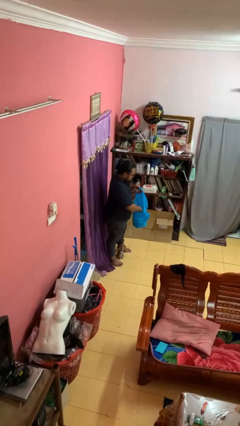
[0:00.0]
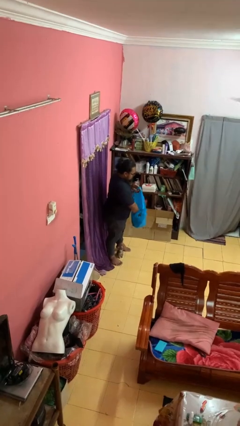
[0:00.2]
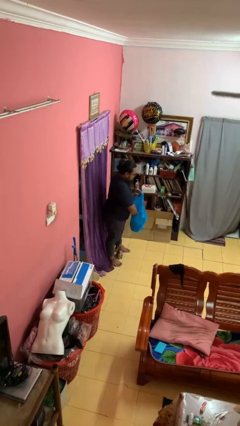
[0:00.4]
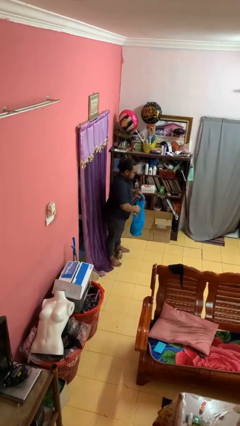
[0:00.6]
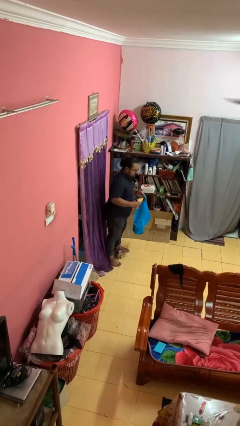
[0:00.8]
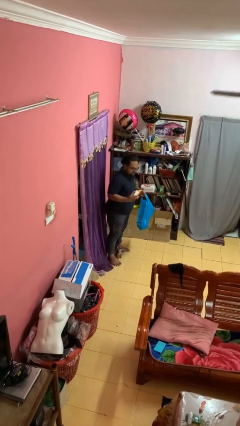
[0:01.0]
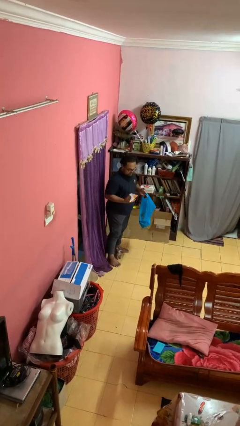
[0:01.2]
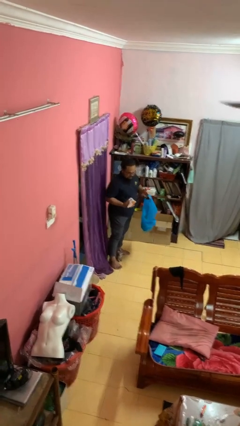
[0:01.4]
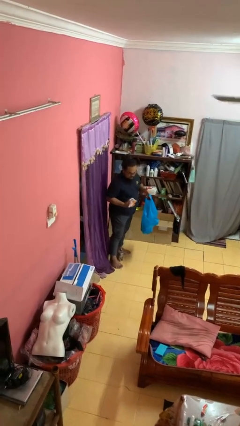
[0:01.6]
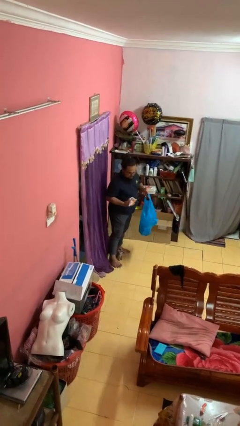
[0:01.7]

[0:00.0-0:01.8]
person takes object from bag

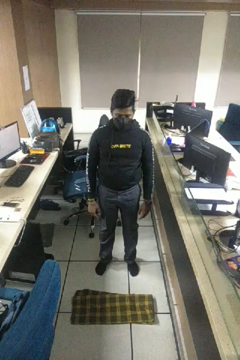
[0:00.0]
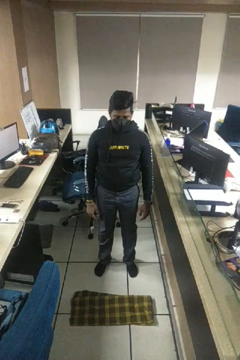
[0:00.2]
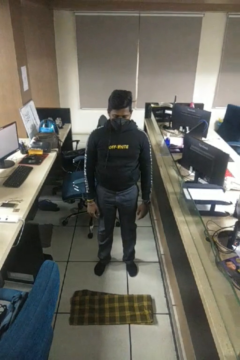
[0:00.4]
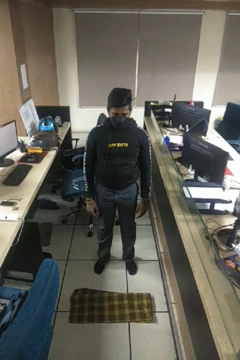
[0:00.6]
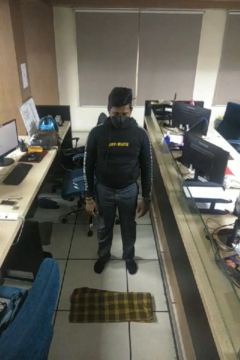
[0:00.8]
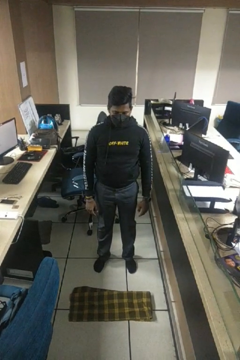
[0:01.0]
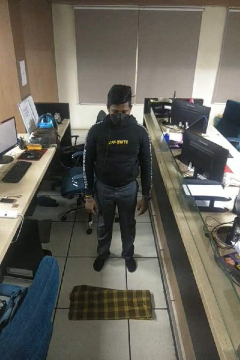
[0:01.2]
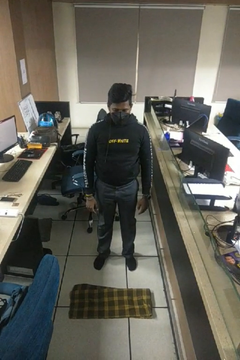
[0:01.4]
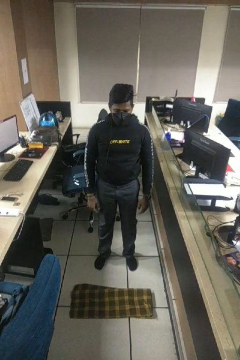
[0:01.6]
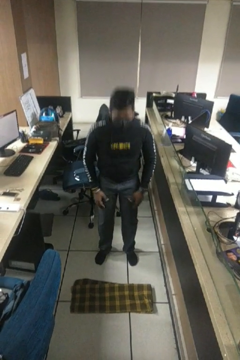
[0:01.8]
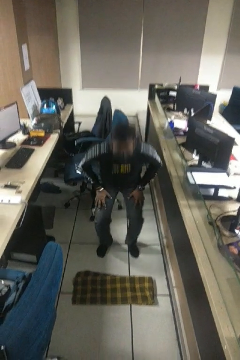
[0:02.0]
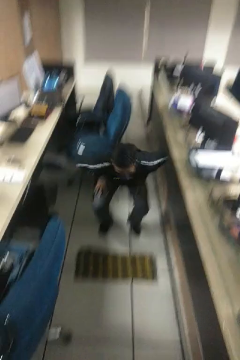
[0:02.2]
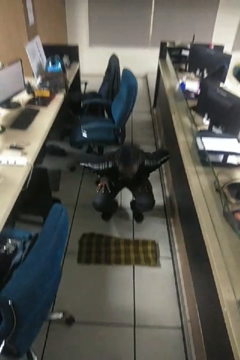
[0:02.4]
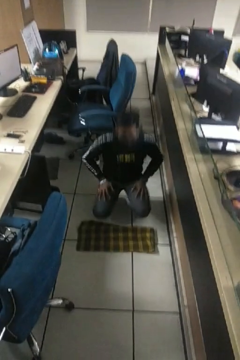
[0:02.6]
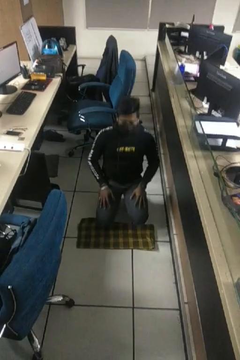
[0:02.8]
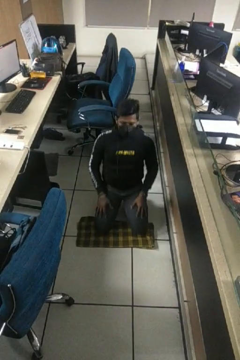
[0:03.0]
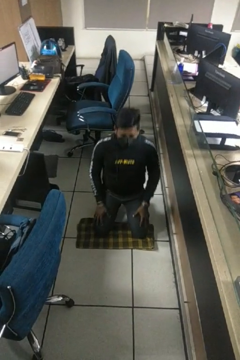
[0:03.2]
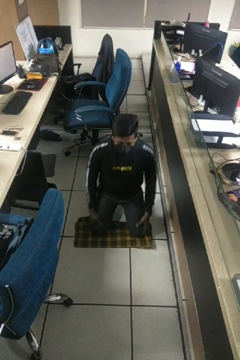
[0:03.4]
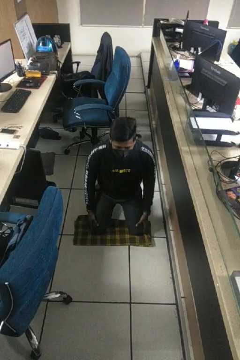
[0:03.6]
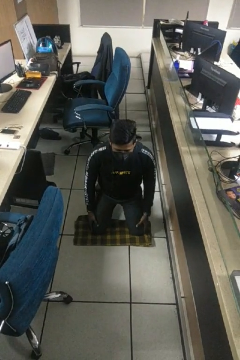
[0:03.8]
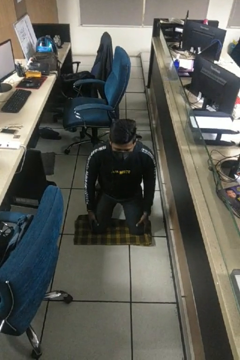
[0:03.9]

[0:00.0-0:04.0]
person kneels

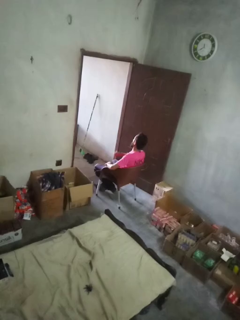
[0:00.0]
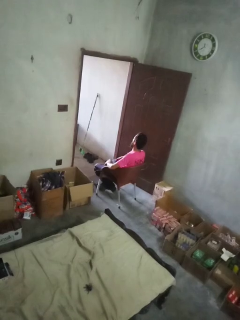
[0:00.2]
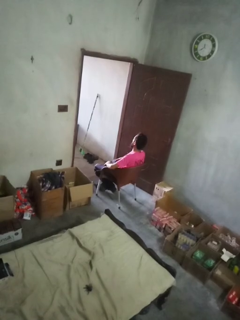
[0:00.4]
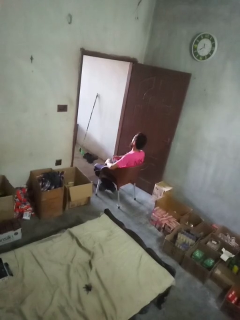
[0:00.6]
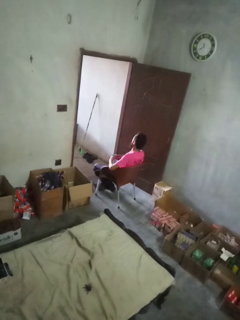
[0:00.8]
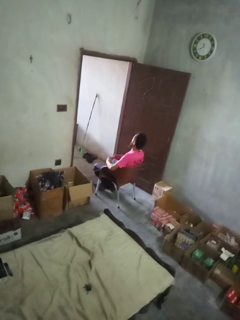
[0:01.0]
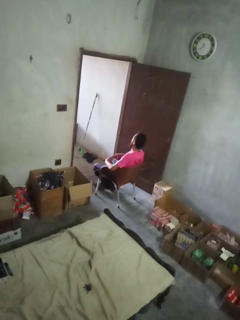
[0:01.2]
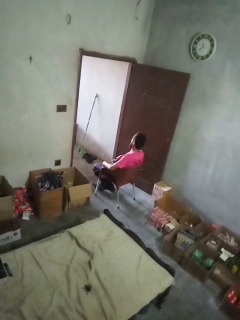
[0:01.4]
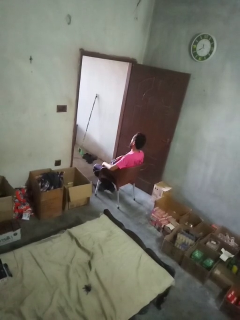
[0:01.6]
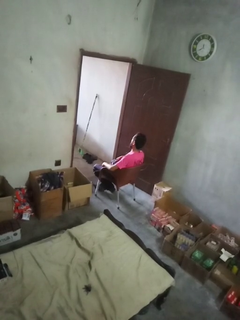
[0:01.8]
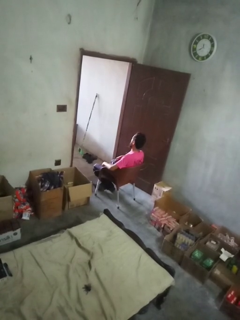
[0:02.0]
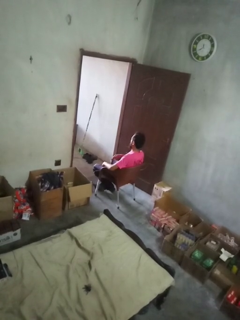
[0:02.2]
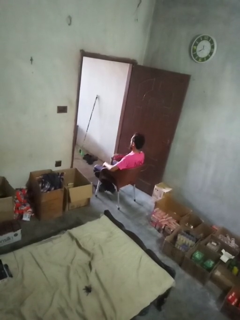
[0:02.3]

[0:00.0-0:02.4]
person takes off gloves

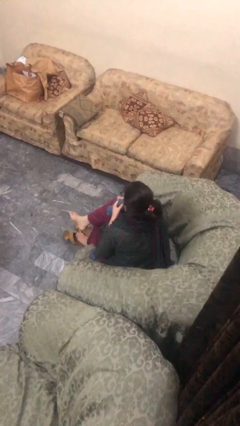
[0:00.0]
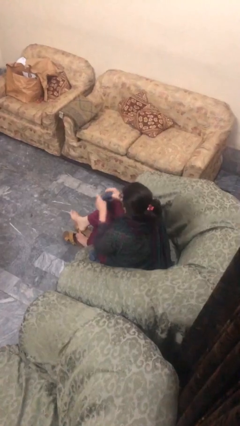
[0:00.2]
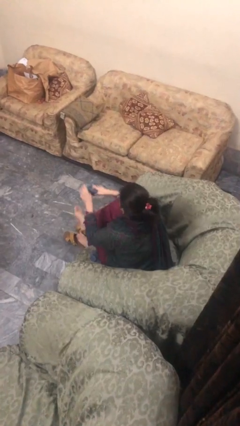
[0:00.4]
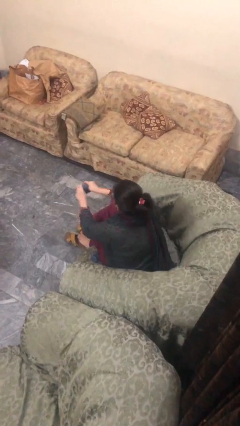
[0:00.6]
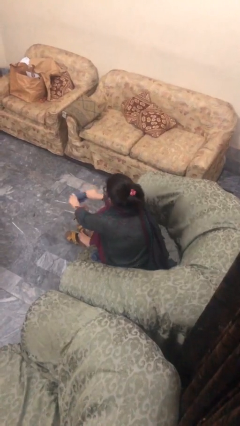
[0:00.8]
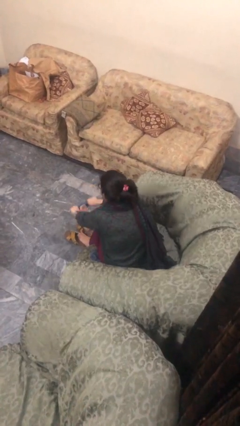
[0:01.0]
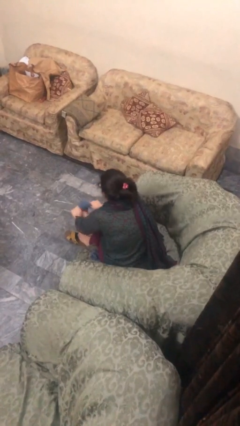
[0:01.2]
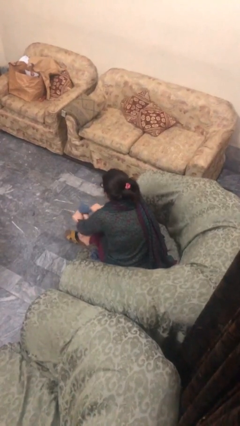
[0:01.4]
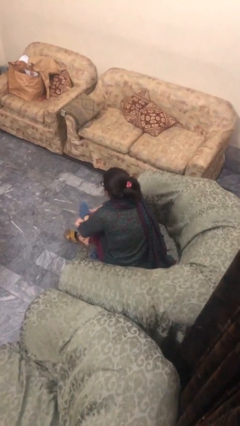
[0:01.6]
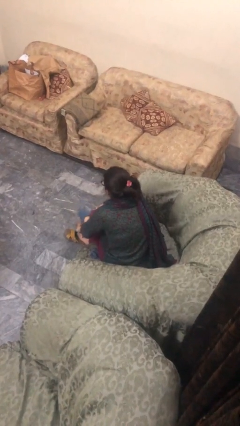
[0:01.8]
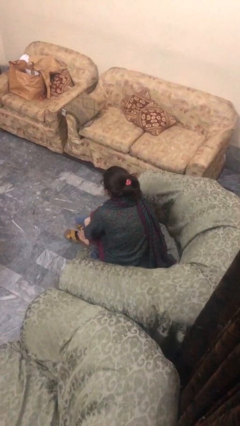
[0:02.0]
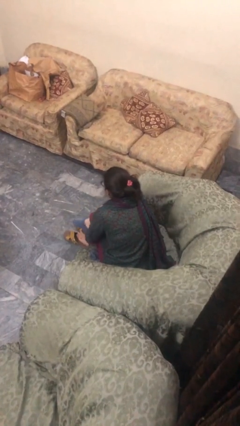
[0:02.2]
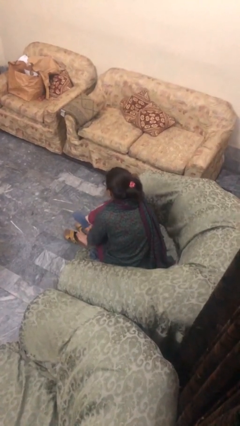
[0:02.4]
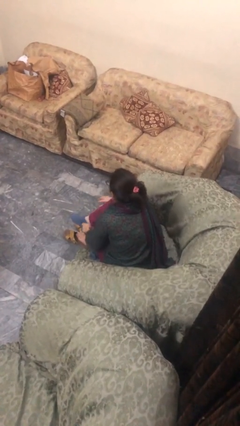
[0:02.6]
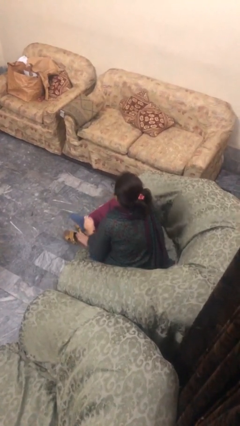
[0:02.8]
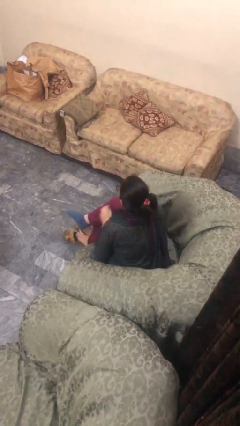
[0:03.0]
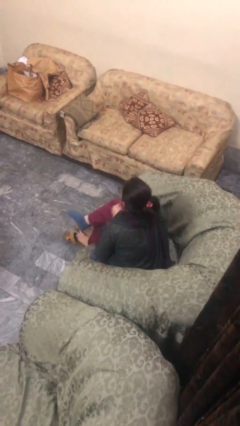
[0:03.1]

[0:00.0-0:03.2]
person puts on socks

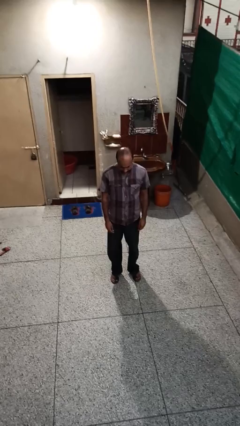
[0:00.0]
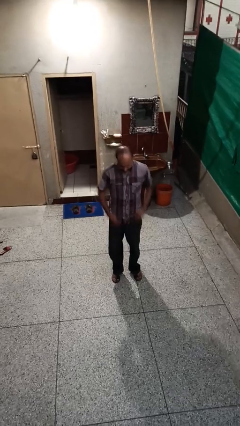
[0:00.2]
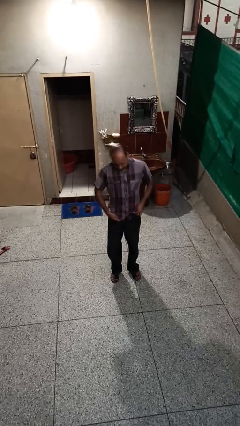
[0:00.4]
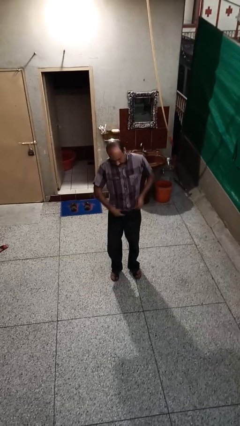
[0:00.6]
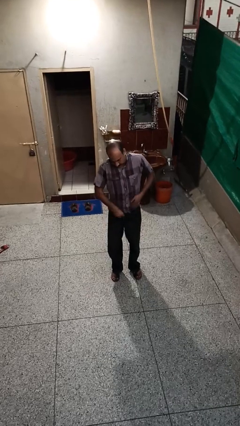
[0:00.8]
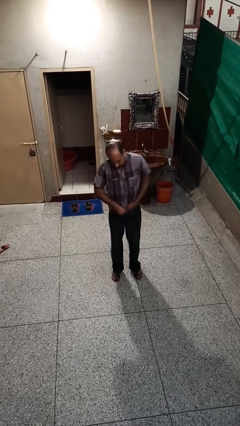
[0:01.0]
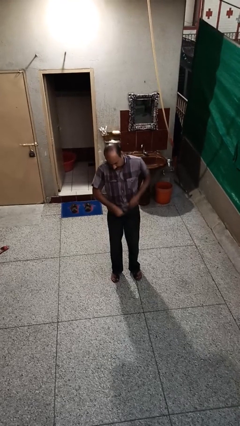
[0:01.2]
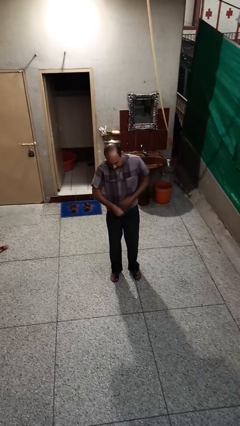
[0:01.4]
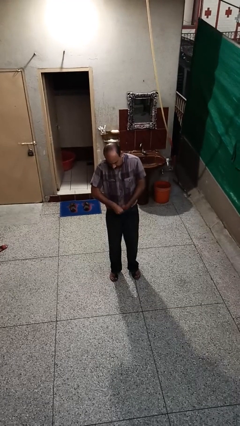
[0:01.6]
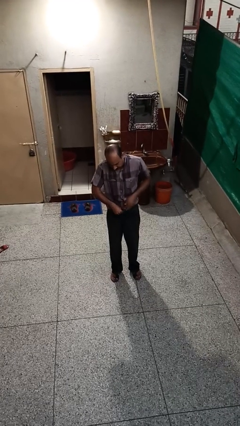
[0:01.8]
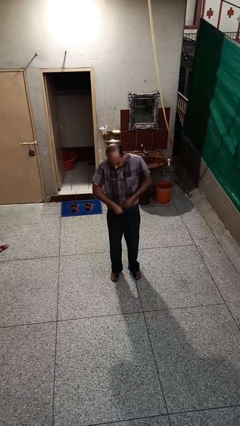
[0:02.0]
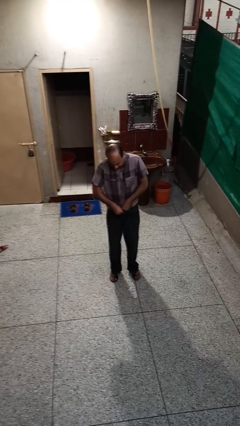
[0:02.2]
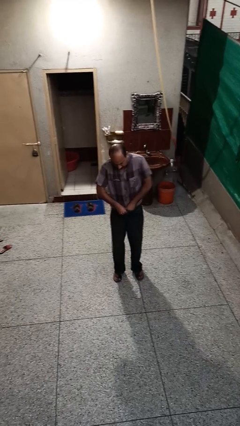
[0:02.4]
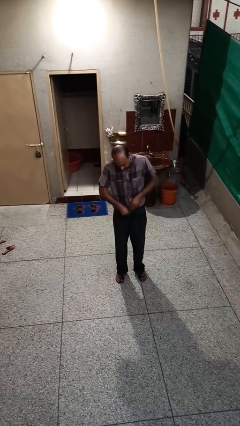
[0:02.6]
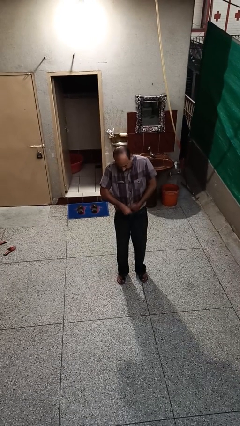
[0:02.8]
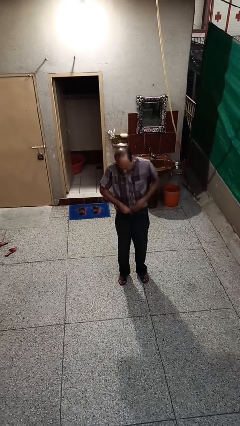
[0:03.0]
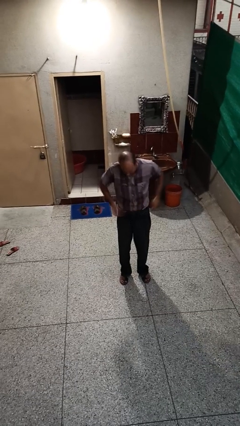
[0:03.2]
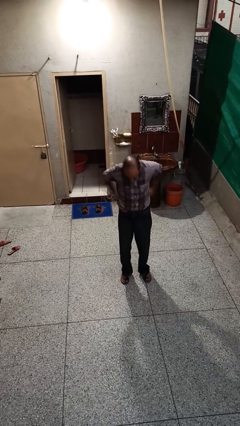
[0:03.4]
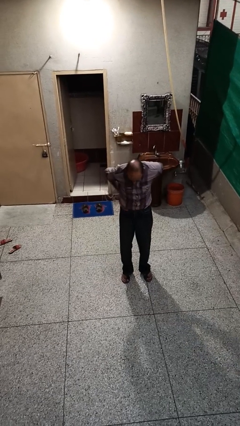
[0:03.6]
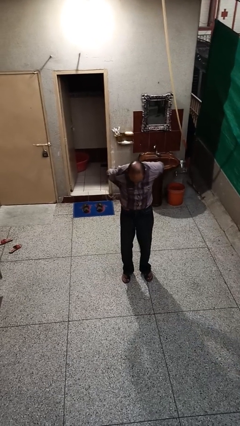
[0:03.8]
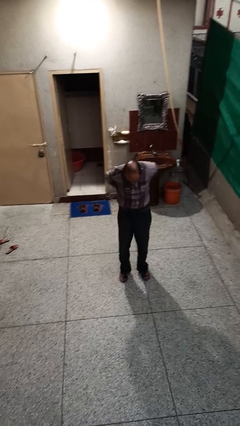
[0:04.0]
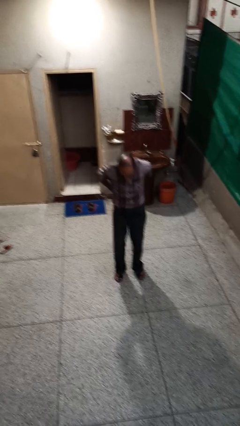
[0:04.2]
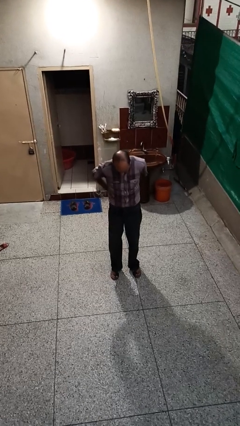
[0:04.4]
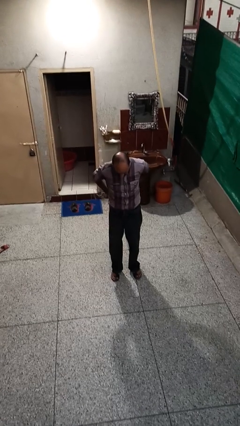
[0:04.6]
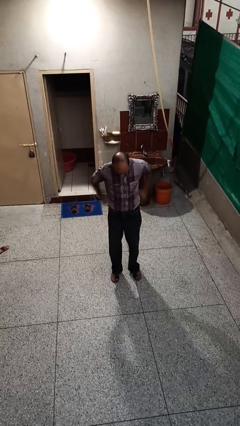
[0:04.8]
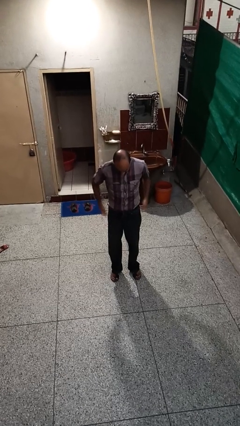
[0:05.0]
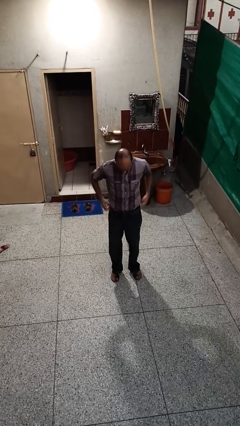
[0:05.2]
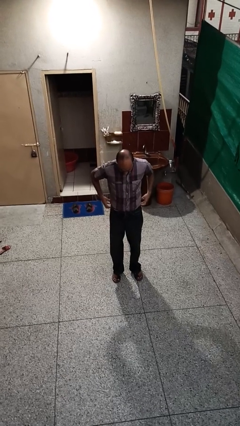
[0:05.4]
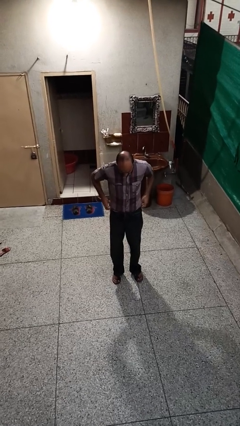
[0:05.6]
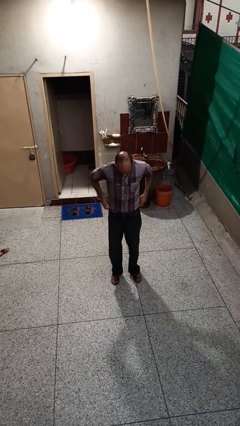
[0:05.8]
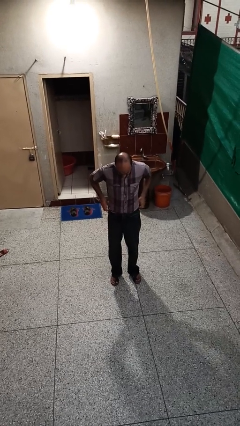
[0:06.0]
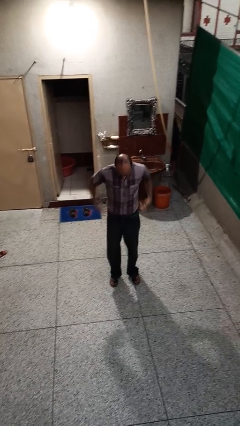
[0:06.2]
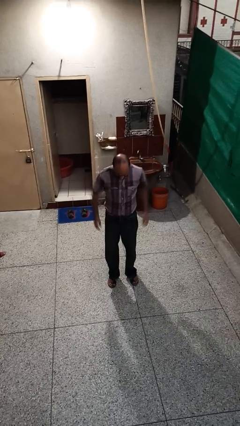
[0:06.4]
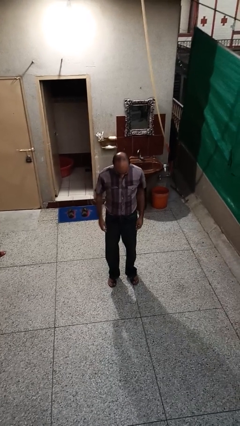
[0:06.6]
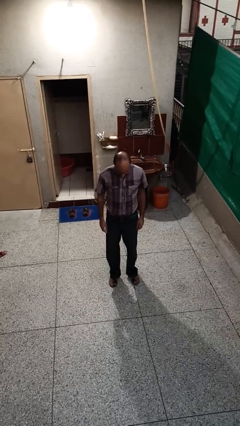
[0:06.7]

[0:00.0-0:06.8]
person tucks in shirt

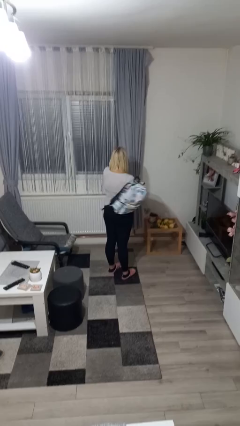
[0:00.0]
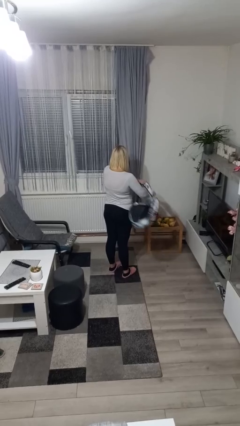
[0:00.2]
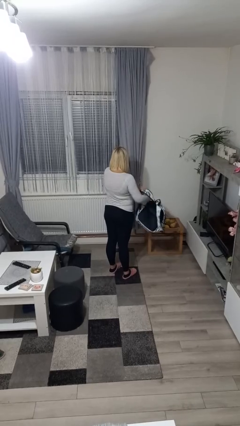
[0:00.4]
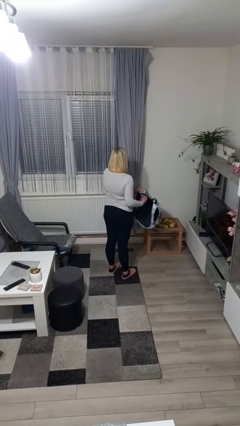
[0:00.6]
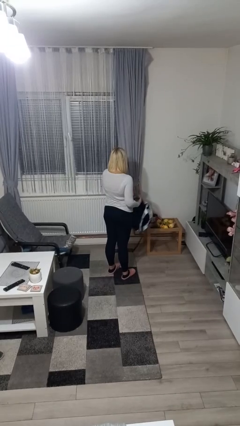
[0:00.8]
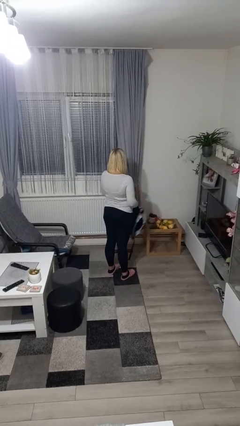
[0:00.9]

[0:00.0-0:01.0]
person takes off backpack
